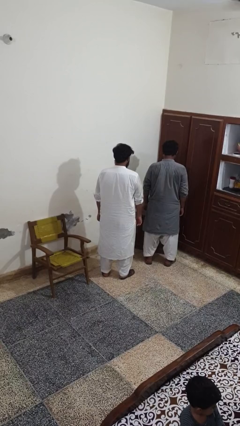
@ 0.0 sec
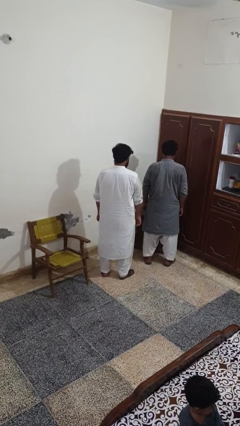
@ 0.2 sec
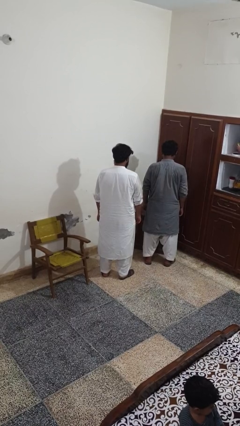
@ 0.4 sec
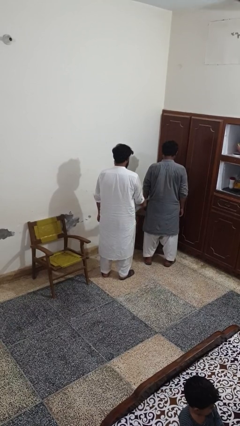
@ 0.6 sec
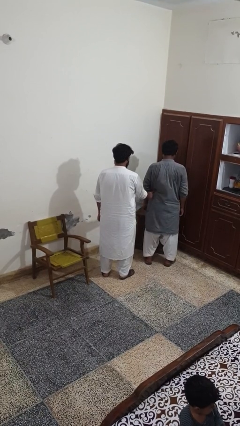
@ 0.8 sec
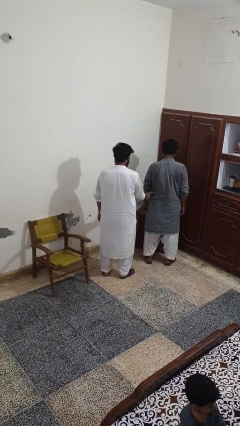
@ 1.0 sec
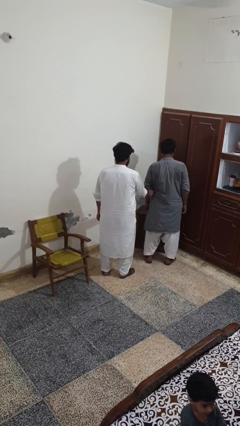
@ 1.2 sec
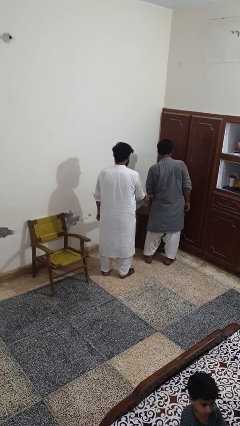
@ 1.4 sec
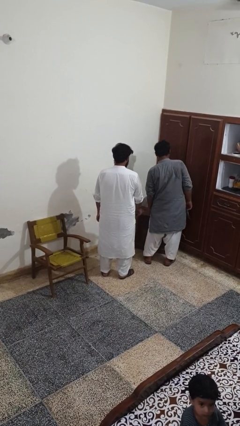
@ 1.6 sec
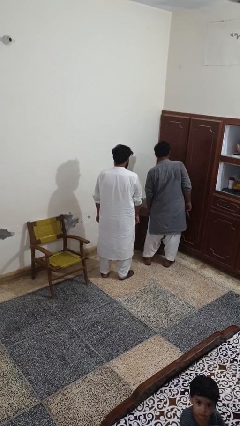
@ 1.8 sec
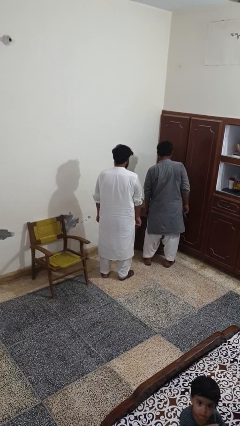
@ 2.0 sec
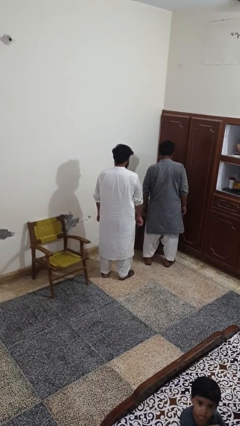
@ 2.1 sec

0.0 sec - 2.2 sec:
person tickles person

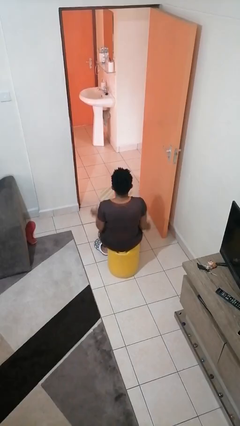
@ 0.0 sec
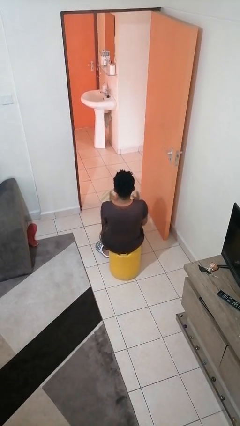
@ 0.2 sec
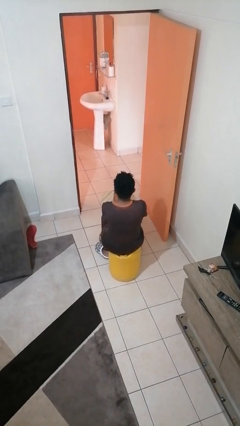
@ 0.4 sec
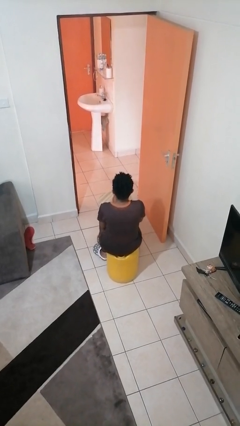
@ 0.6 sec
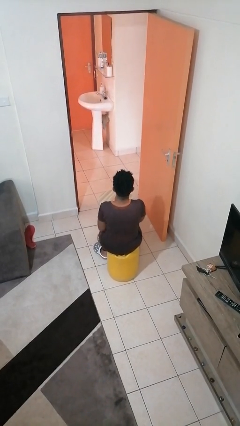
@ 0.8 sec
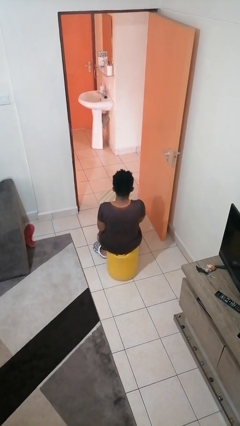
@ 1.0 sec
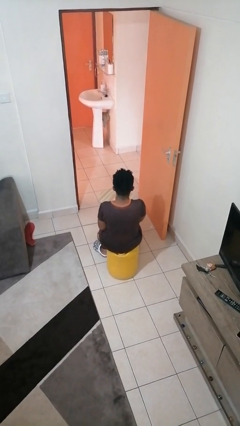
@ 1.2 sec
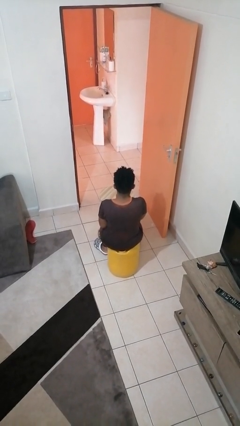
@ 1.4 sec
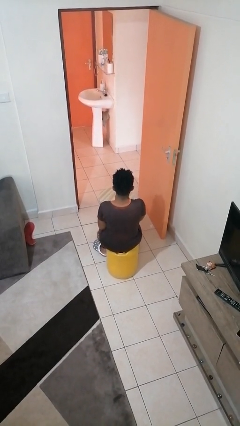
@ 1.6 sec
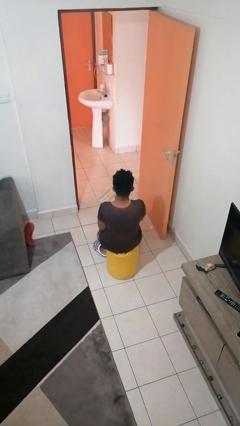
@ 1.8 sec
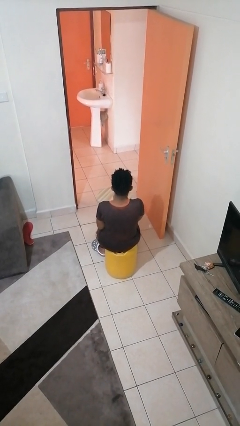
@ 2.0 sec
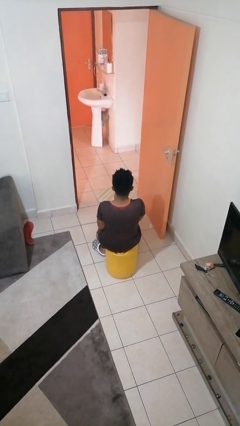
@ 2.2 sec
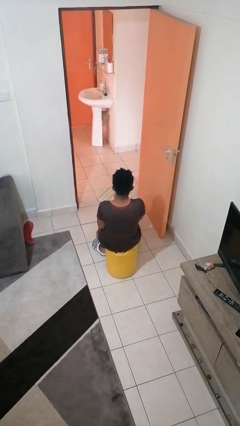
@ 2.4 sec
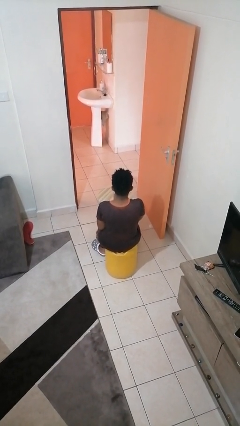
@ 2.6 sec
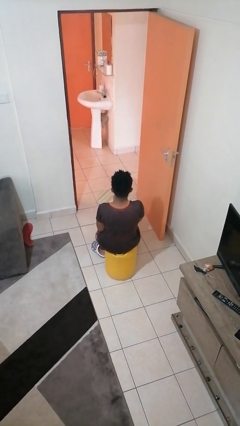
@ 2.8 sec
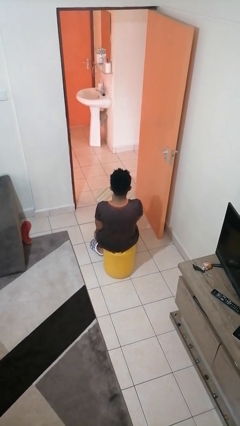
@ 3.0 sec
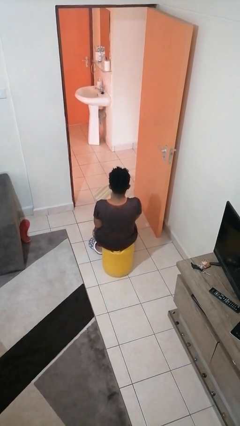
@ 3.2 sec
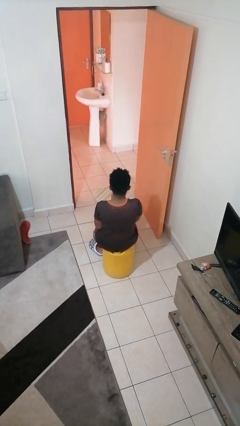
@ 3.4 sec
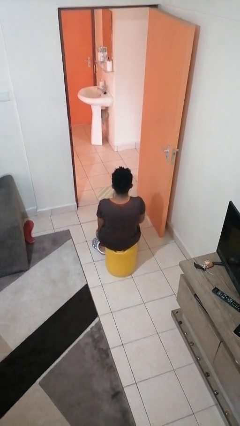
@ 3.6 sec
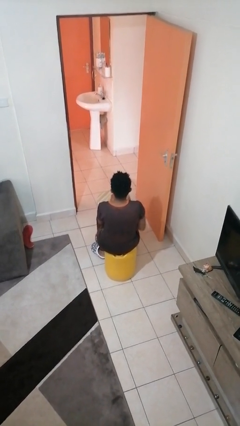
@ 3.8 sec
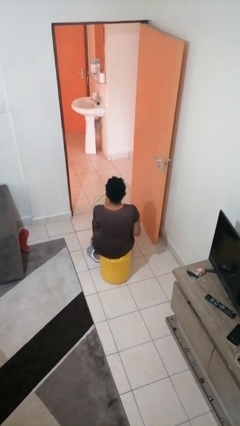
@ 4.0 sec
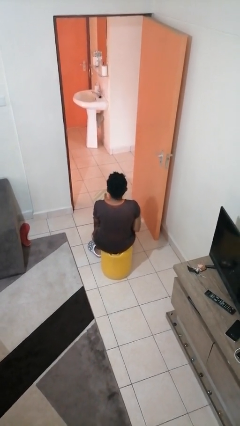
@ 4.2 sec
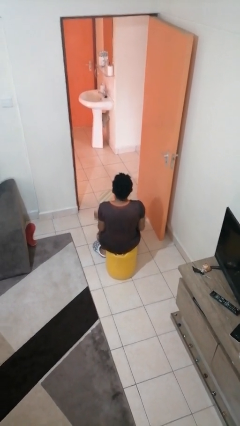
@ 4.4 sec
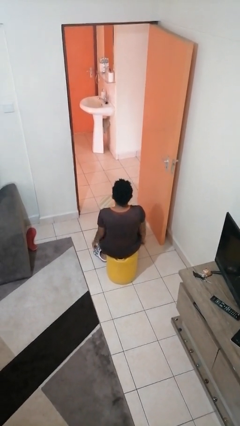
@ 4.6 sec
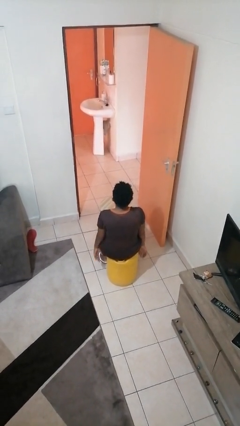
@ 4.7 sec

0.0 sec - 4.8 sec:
person drinks from straw

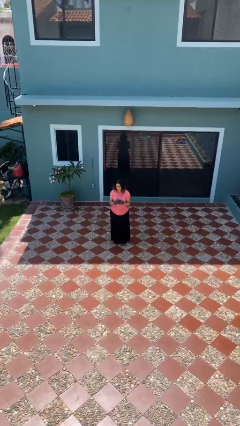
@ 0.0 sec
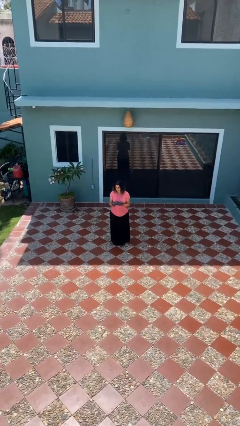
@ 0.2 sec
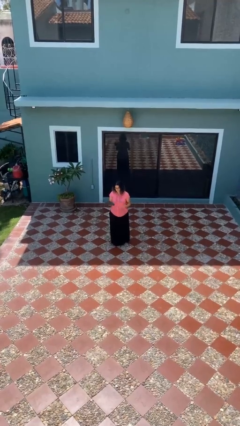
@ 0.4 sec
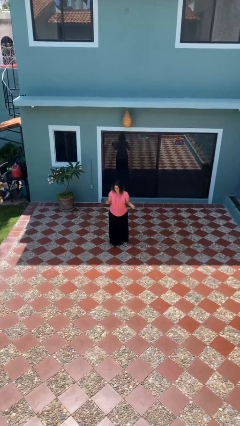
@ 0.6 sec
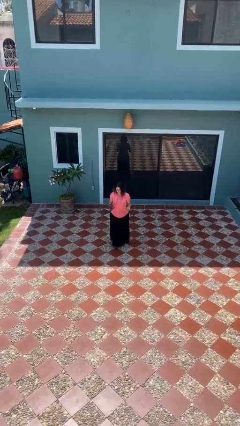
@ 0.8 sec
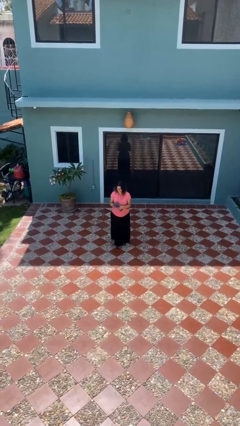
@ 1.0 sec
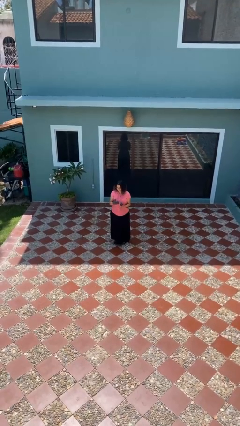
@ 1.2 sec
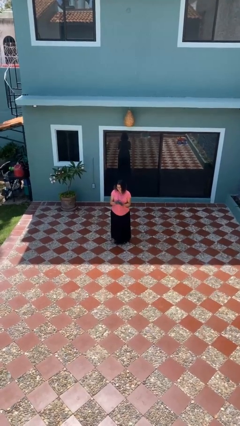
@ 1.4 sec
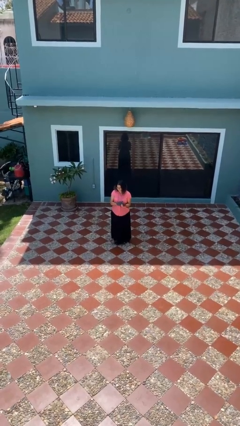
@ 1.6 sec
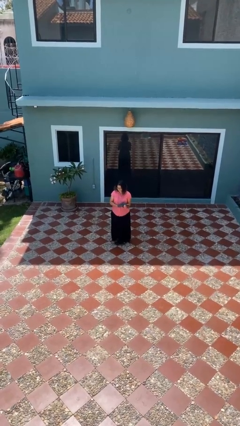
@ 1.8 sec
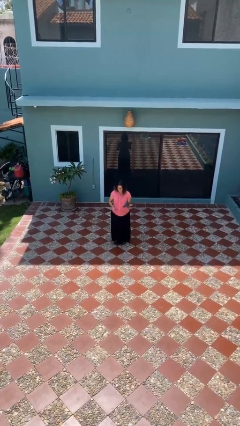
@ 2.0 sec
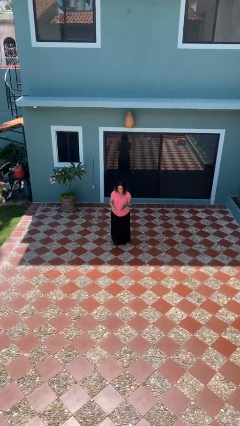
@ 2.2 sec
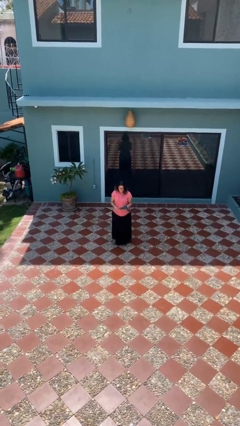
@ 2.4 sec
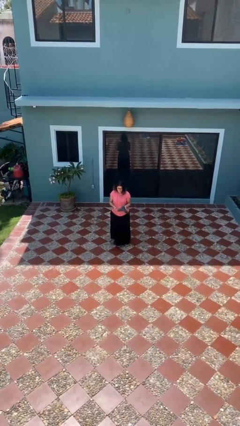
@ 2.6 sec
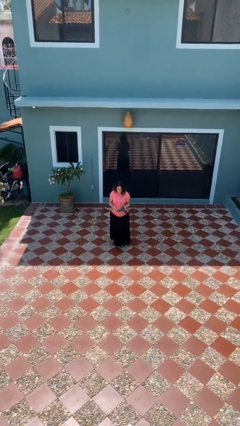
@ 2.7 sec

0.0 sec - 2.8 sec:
person takes off gloves

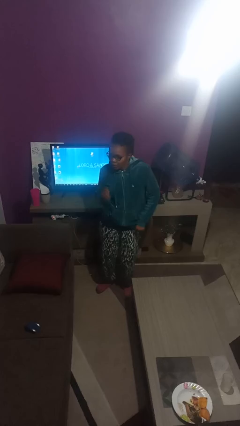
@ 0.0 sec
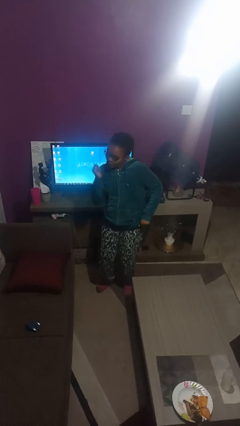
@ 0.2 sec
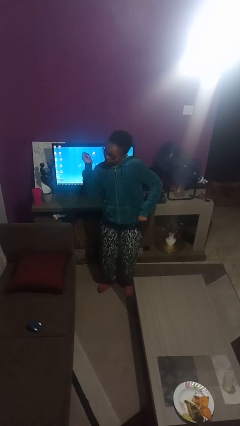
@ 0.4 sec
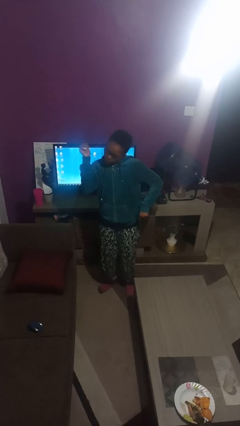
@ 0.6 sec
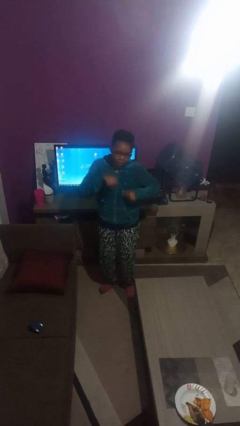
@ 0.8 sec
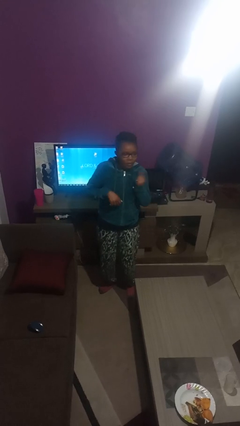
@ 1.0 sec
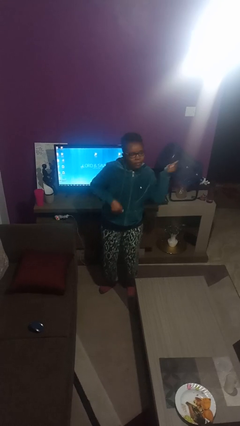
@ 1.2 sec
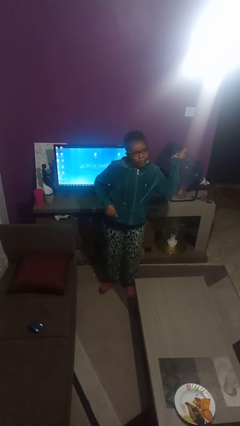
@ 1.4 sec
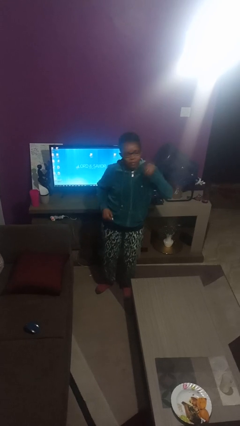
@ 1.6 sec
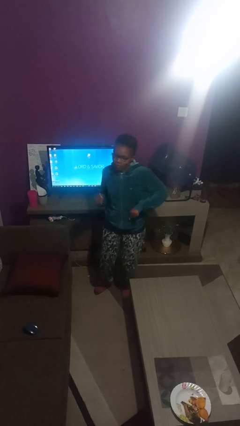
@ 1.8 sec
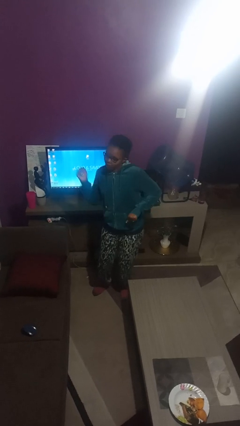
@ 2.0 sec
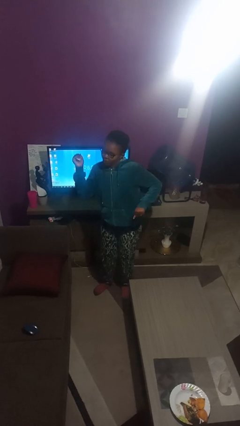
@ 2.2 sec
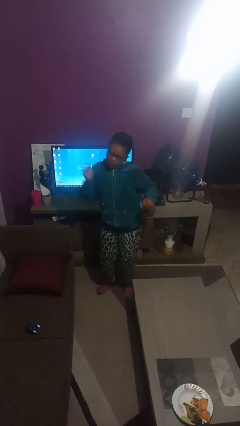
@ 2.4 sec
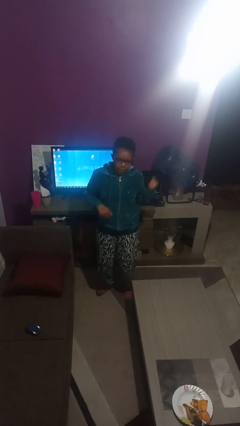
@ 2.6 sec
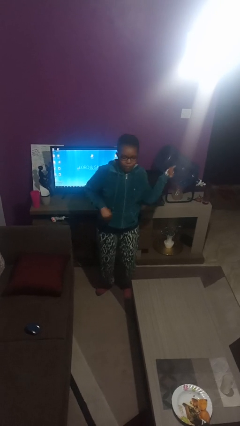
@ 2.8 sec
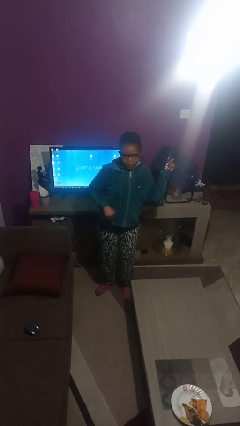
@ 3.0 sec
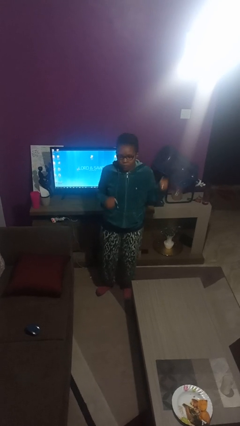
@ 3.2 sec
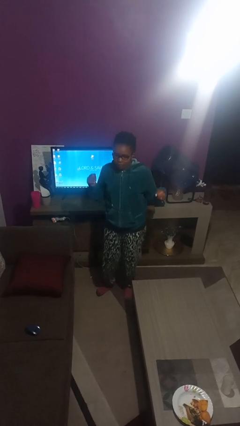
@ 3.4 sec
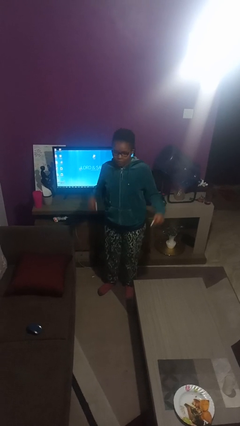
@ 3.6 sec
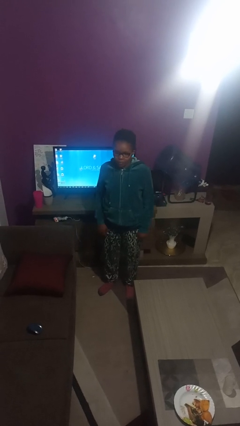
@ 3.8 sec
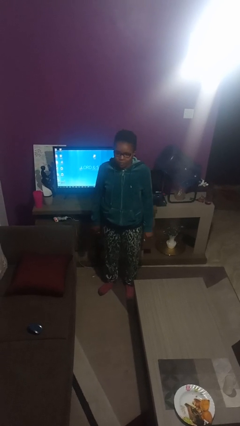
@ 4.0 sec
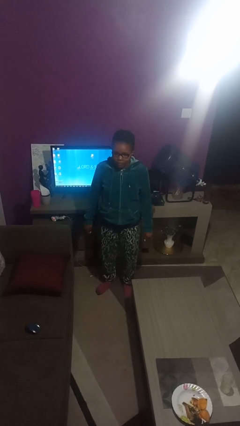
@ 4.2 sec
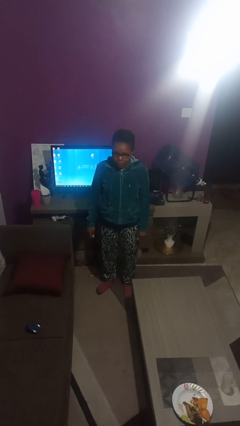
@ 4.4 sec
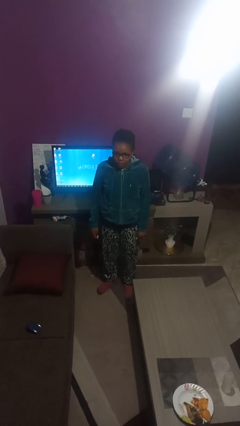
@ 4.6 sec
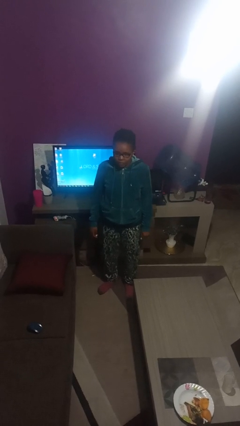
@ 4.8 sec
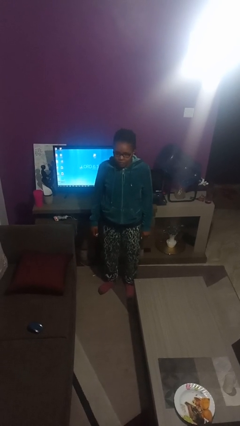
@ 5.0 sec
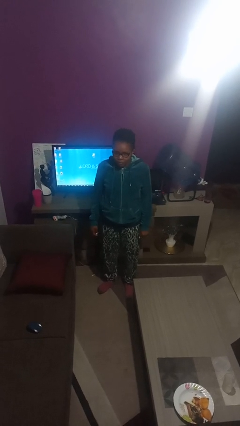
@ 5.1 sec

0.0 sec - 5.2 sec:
person dances in place

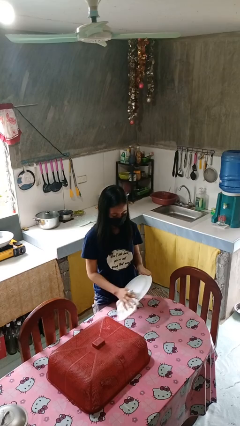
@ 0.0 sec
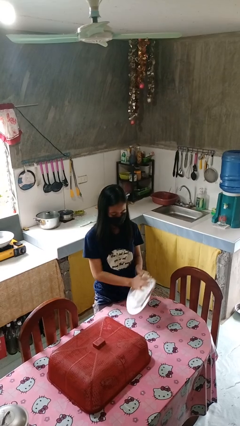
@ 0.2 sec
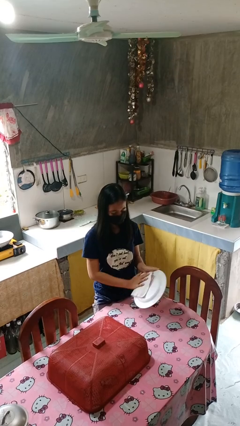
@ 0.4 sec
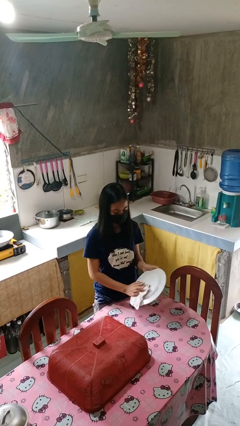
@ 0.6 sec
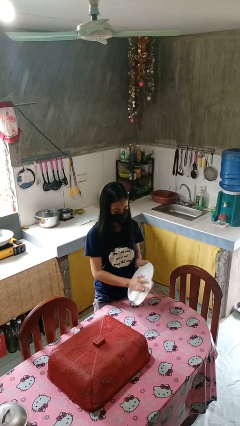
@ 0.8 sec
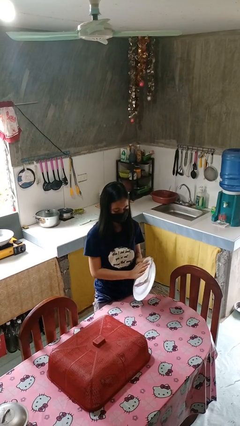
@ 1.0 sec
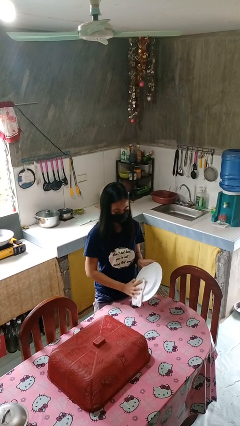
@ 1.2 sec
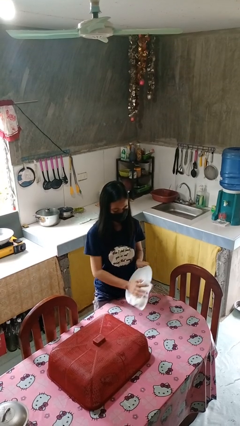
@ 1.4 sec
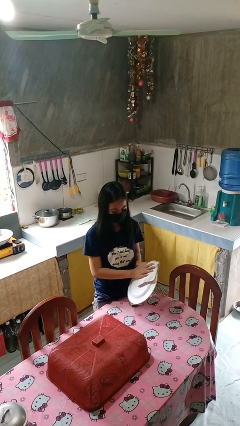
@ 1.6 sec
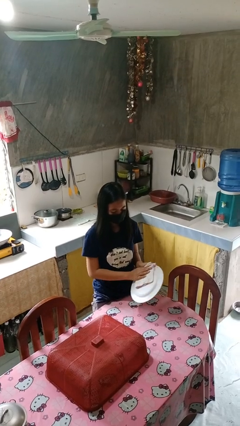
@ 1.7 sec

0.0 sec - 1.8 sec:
person dries dish

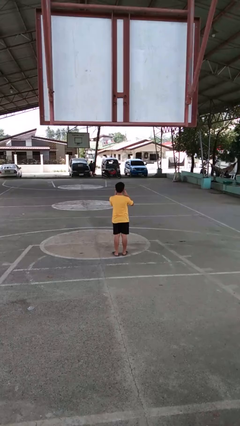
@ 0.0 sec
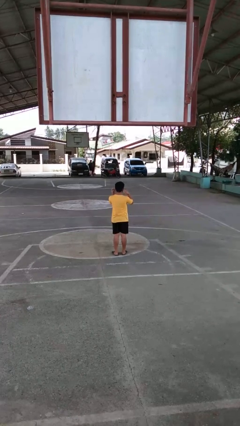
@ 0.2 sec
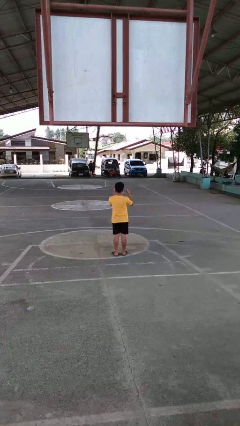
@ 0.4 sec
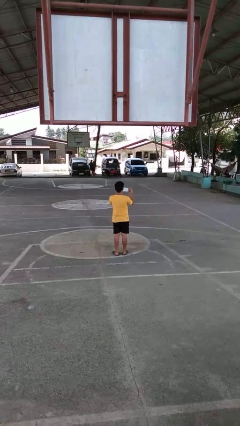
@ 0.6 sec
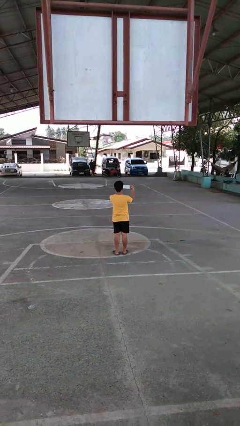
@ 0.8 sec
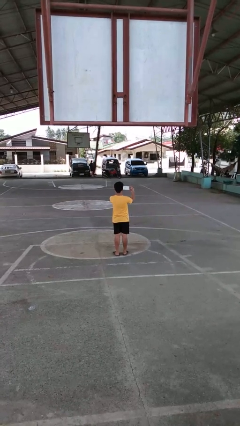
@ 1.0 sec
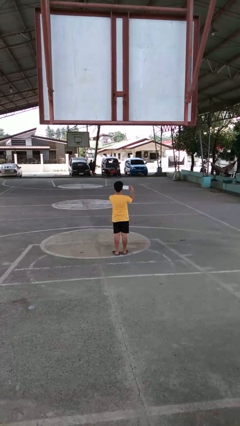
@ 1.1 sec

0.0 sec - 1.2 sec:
person takes off facemask
